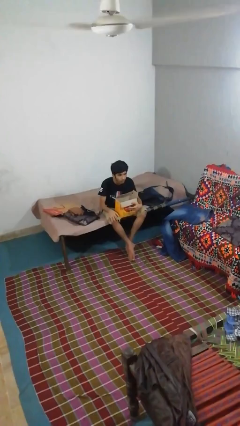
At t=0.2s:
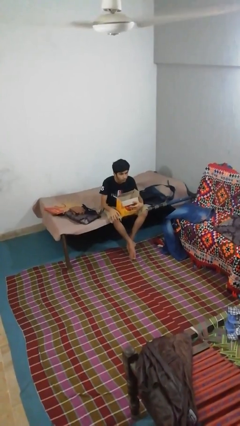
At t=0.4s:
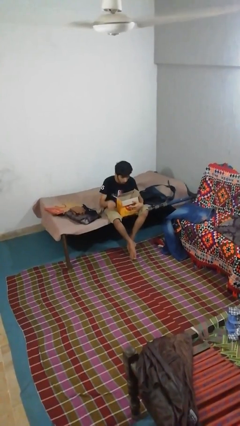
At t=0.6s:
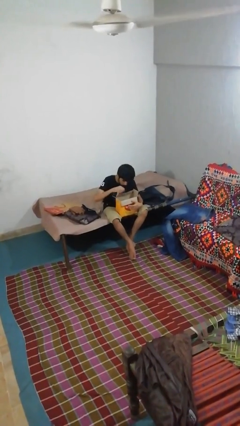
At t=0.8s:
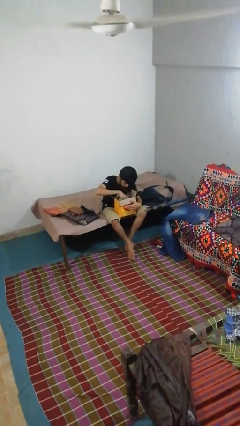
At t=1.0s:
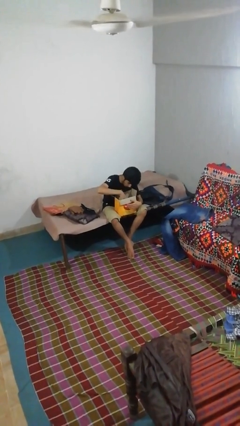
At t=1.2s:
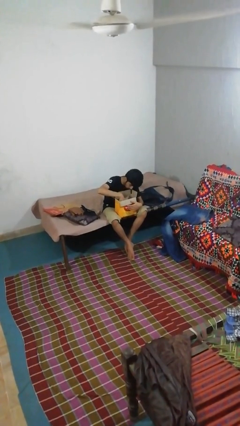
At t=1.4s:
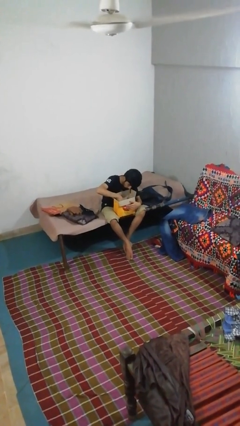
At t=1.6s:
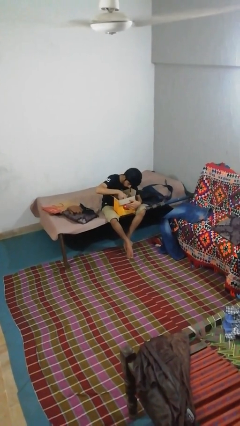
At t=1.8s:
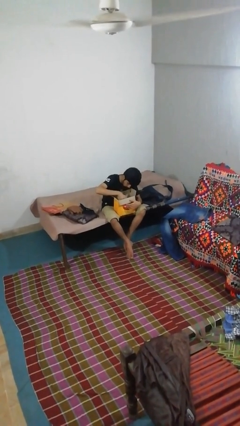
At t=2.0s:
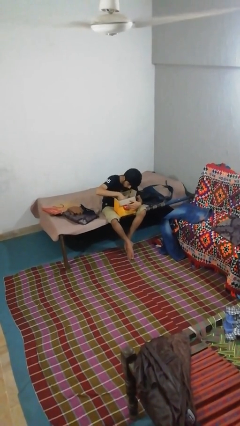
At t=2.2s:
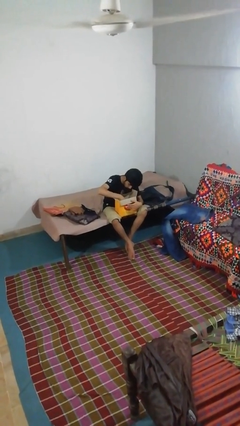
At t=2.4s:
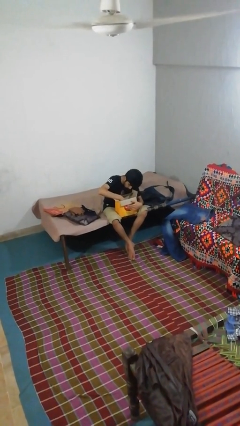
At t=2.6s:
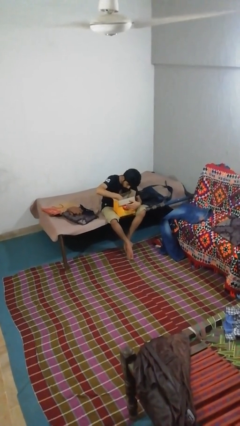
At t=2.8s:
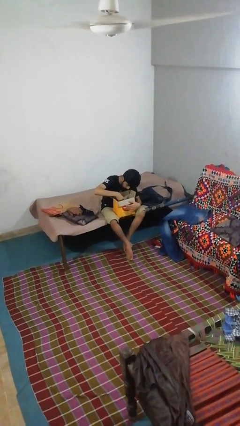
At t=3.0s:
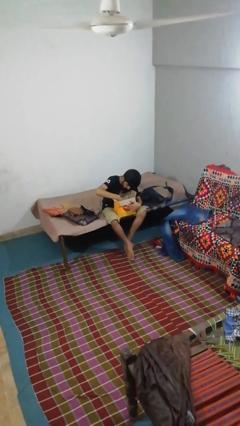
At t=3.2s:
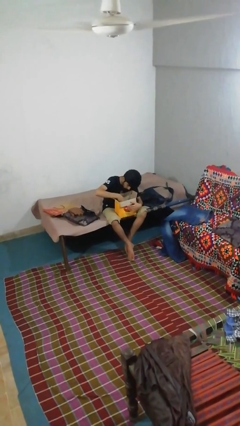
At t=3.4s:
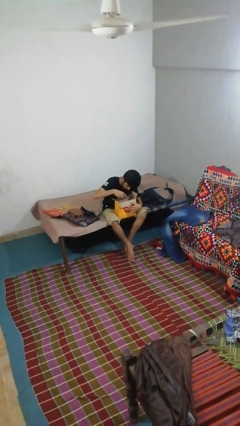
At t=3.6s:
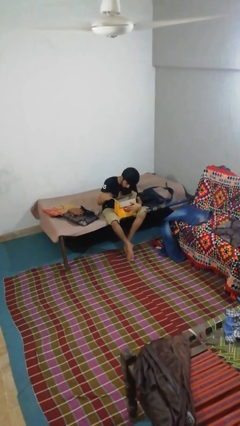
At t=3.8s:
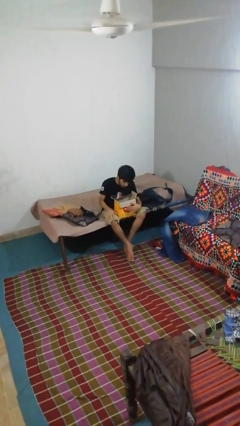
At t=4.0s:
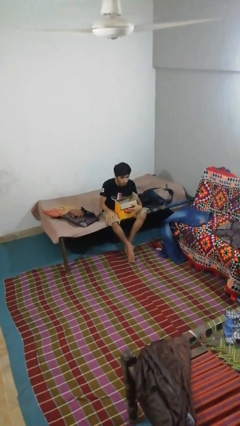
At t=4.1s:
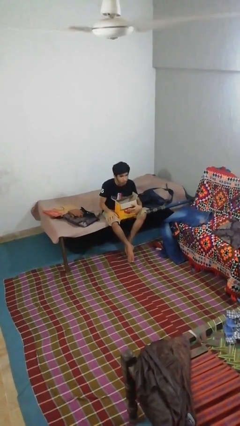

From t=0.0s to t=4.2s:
person searches in box

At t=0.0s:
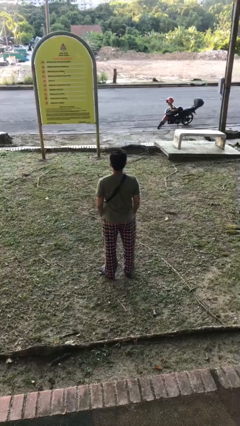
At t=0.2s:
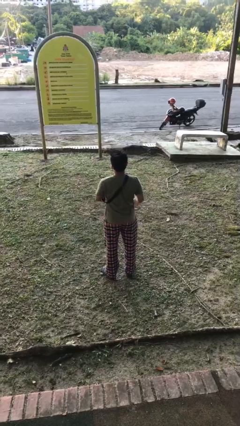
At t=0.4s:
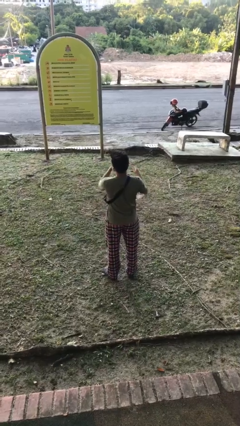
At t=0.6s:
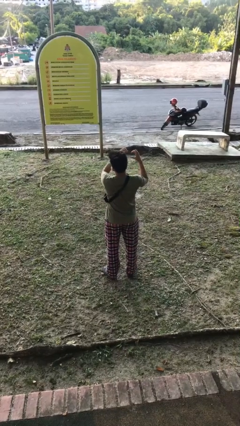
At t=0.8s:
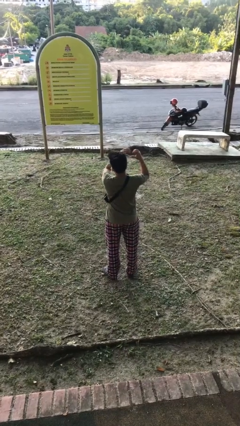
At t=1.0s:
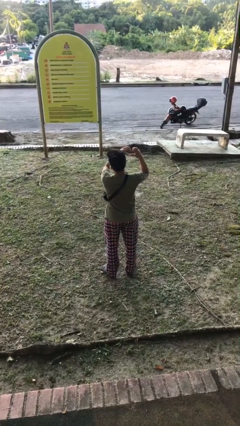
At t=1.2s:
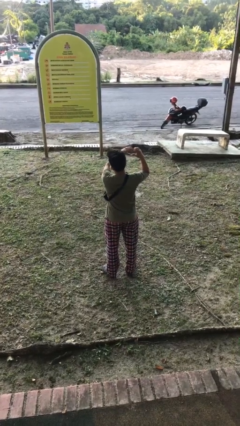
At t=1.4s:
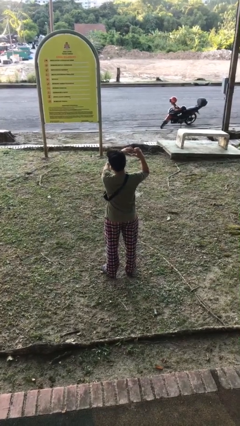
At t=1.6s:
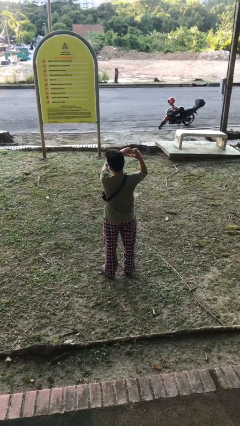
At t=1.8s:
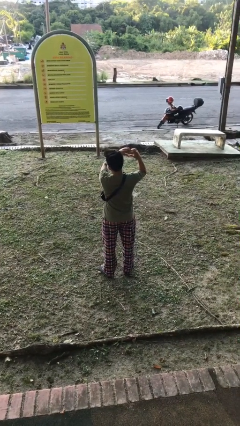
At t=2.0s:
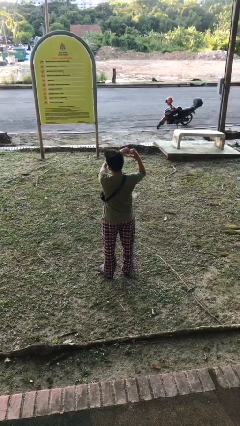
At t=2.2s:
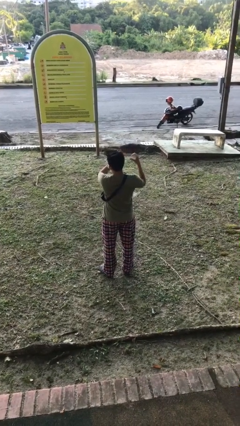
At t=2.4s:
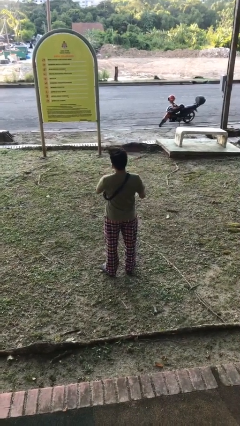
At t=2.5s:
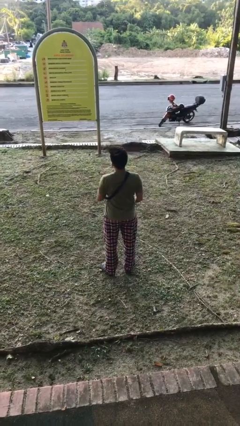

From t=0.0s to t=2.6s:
person gestures heart

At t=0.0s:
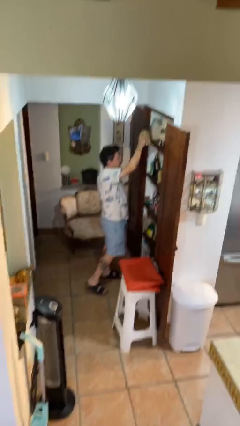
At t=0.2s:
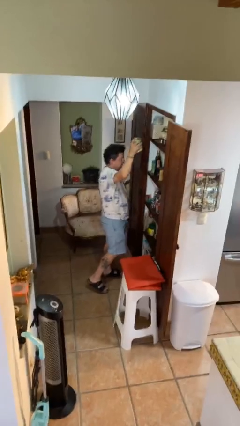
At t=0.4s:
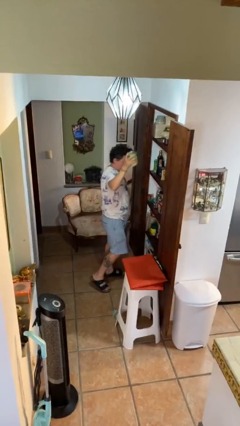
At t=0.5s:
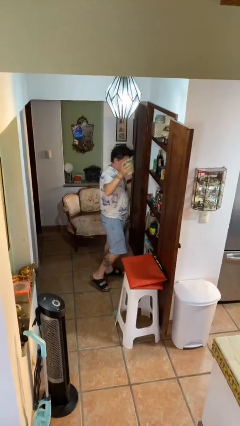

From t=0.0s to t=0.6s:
person picks up object from shelf

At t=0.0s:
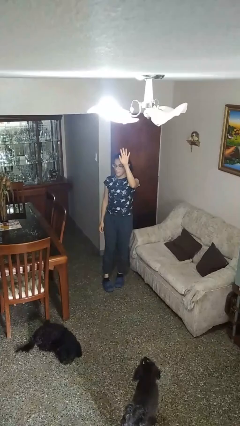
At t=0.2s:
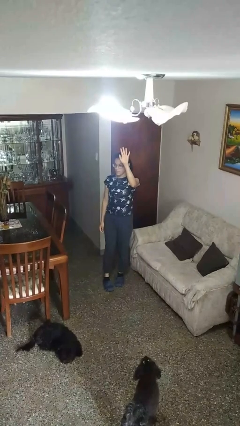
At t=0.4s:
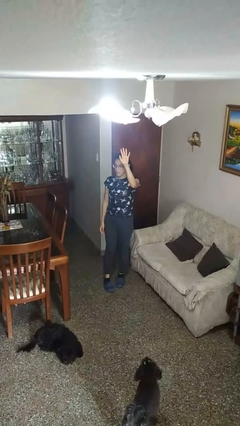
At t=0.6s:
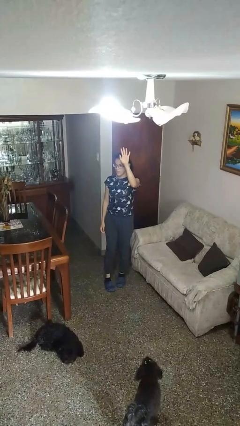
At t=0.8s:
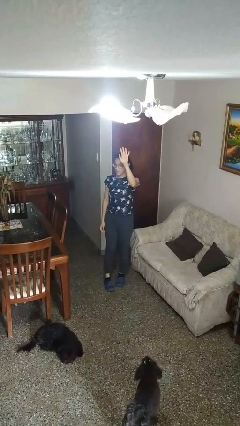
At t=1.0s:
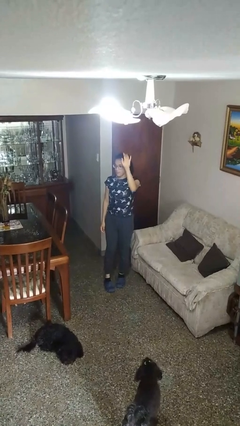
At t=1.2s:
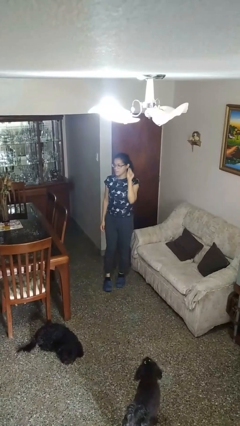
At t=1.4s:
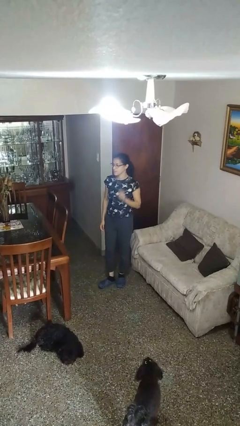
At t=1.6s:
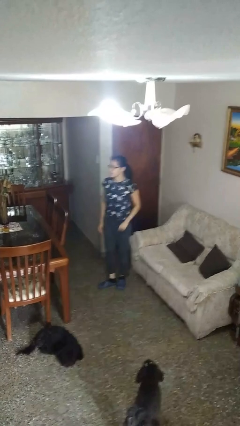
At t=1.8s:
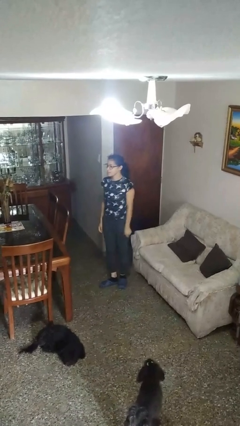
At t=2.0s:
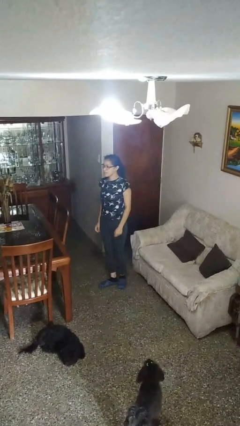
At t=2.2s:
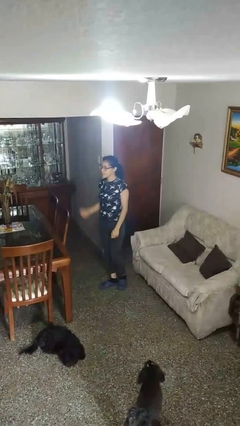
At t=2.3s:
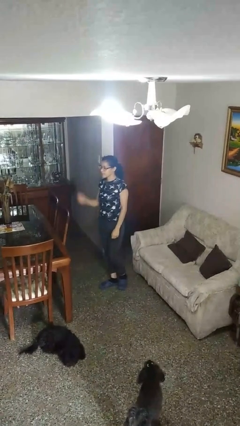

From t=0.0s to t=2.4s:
person gestures raise hand

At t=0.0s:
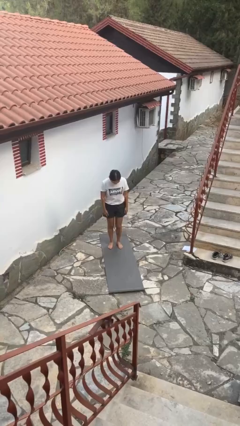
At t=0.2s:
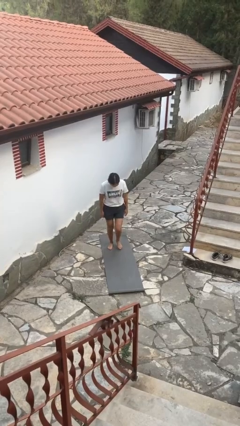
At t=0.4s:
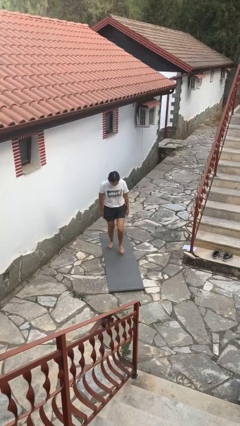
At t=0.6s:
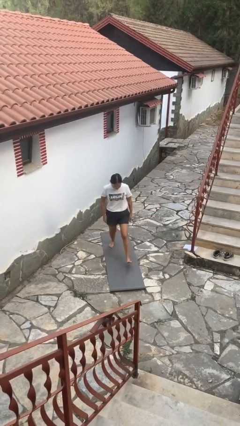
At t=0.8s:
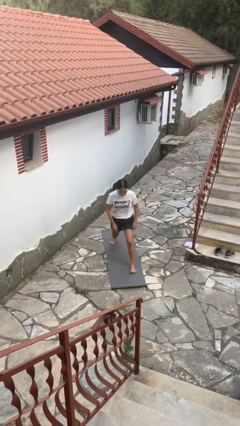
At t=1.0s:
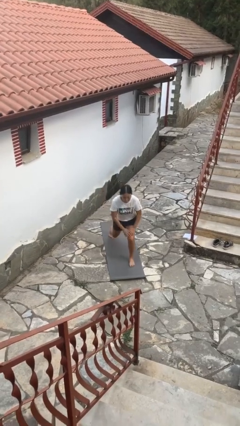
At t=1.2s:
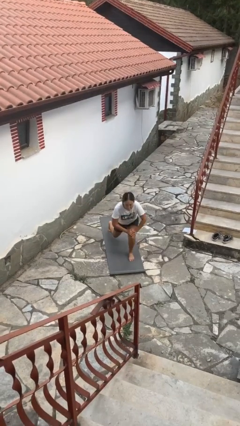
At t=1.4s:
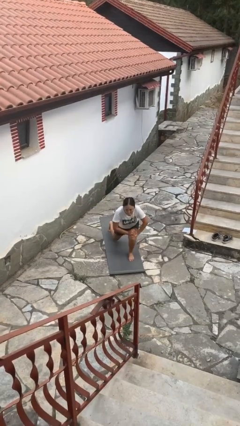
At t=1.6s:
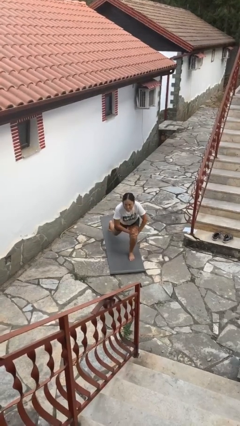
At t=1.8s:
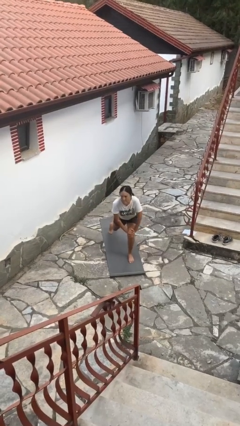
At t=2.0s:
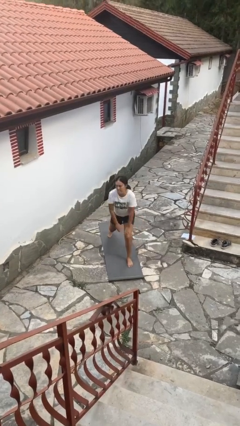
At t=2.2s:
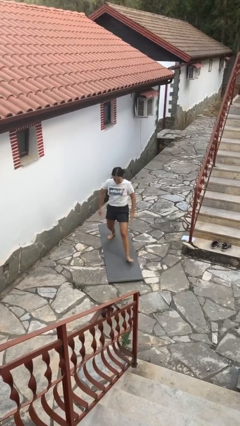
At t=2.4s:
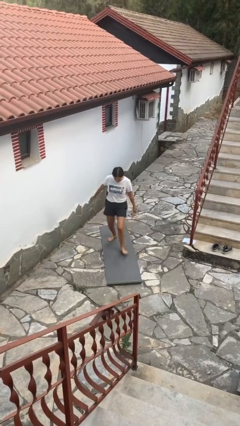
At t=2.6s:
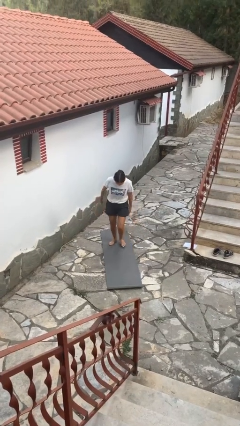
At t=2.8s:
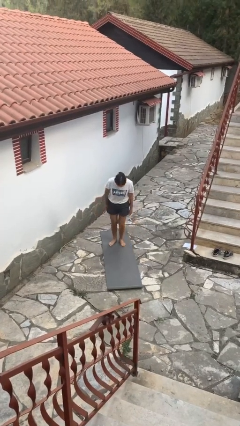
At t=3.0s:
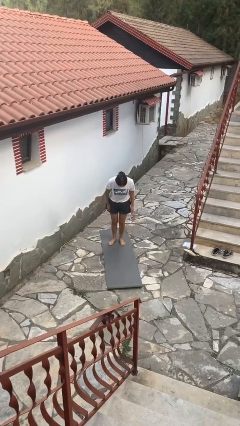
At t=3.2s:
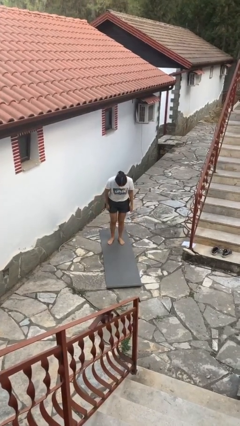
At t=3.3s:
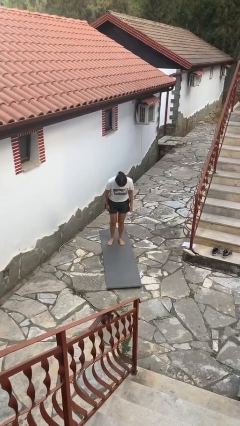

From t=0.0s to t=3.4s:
person exercises with lunges

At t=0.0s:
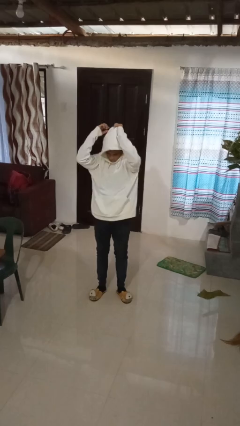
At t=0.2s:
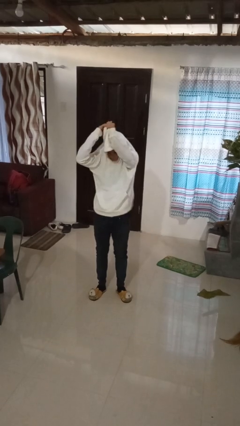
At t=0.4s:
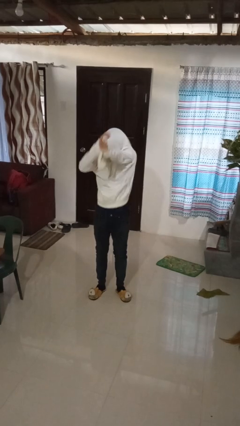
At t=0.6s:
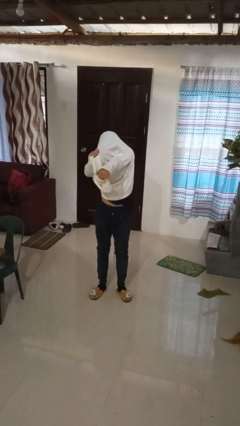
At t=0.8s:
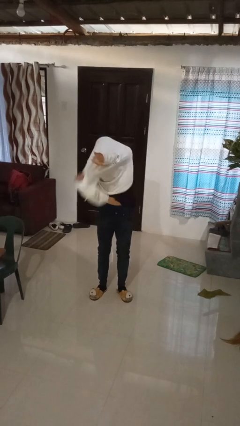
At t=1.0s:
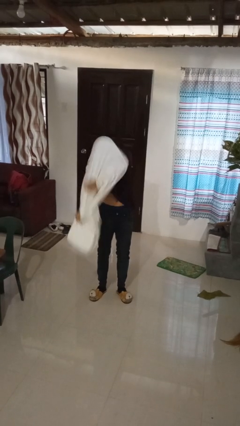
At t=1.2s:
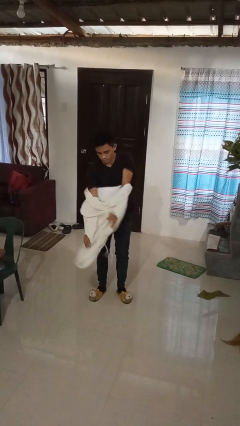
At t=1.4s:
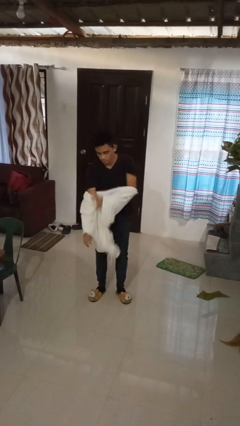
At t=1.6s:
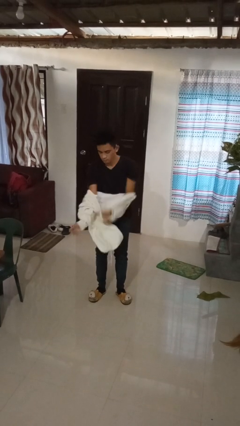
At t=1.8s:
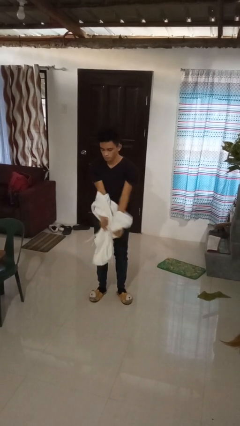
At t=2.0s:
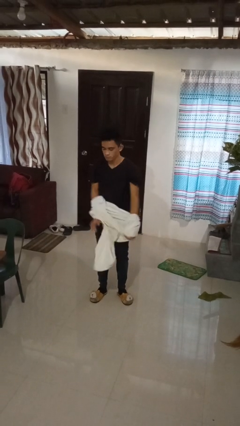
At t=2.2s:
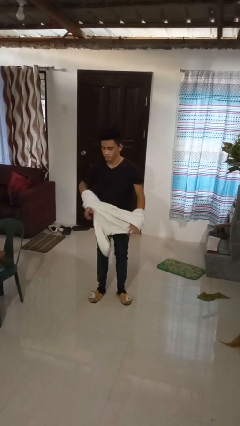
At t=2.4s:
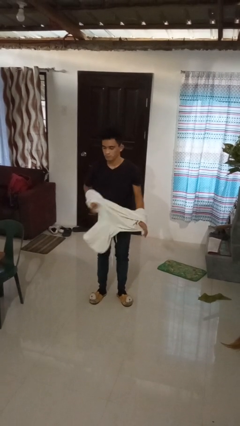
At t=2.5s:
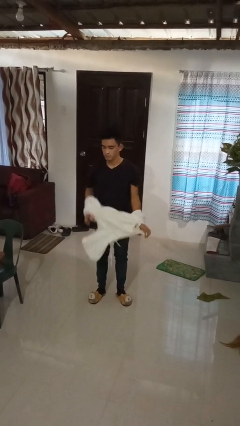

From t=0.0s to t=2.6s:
person takes off hoodie

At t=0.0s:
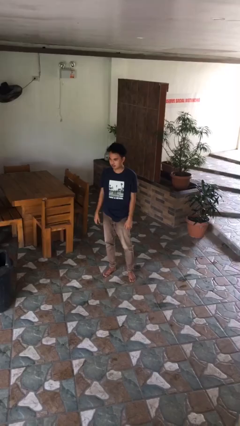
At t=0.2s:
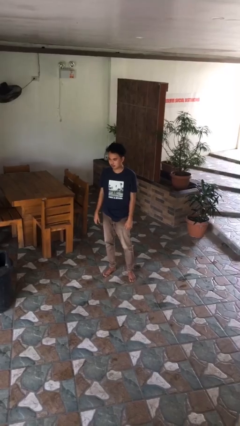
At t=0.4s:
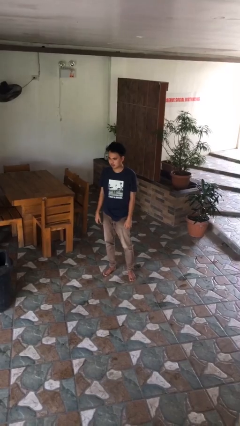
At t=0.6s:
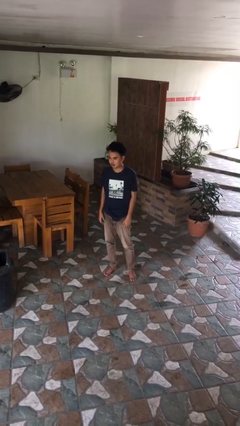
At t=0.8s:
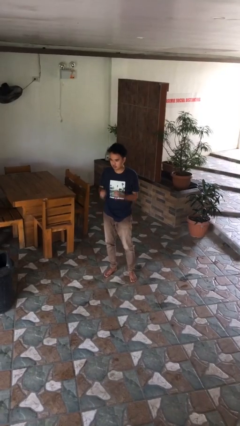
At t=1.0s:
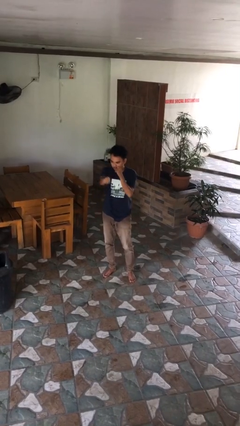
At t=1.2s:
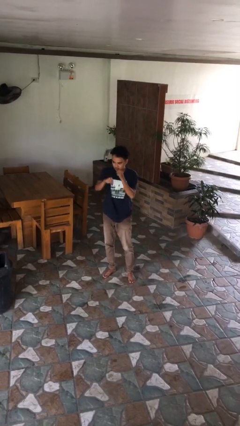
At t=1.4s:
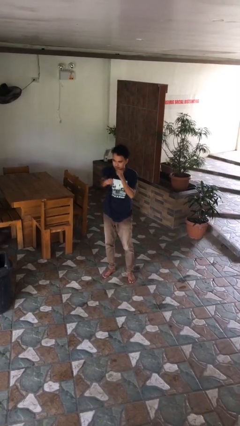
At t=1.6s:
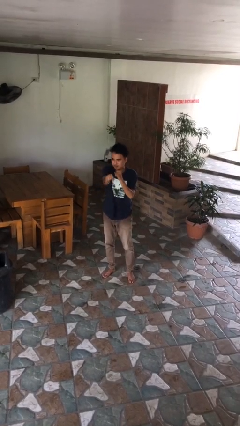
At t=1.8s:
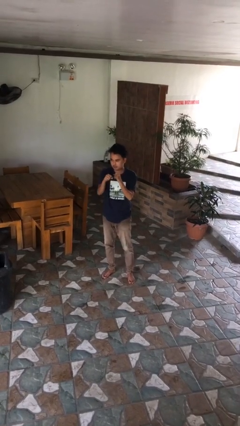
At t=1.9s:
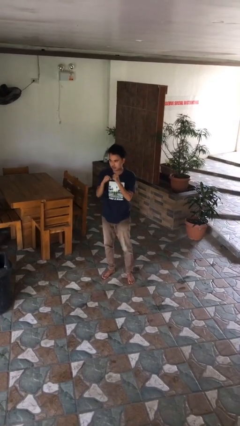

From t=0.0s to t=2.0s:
person punches
